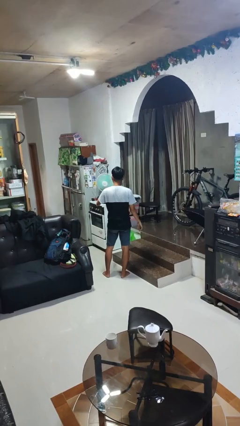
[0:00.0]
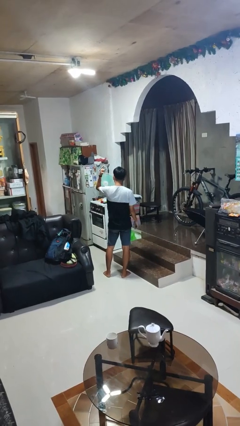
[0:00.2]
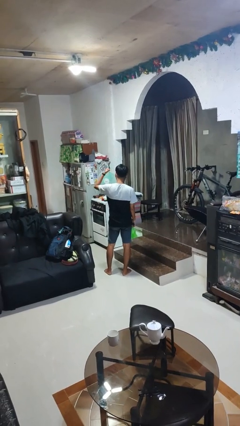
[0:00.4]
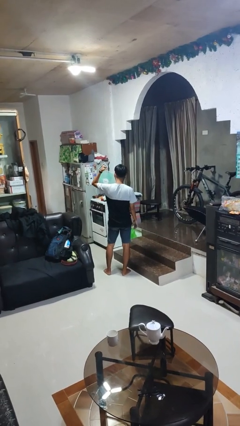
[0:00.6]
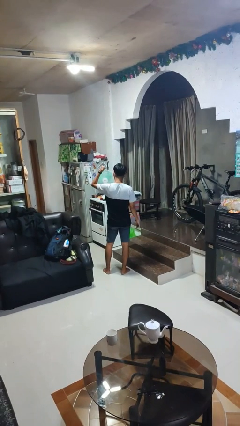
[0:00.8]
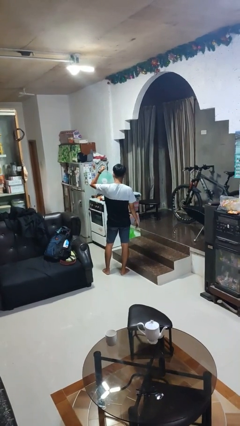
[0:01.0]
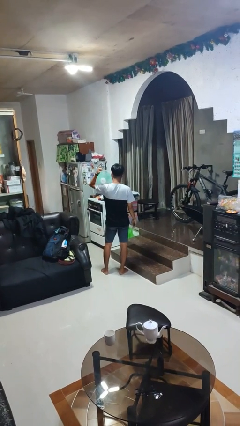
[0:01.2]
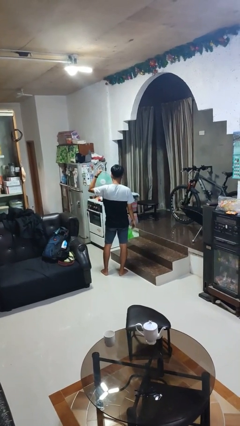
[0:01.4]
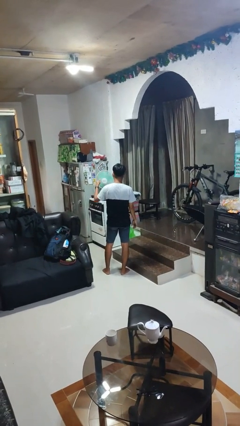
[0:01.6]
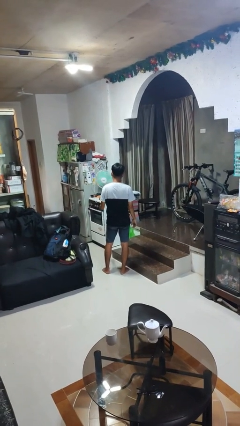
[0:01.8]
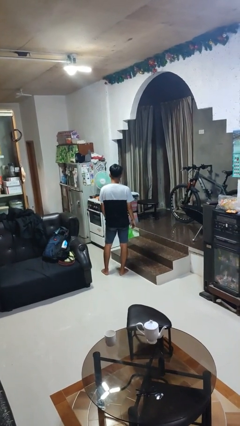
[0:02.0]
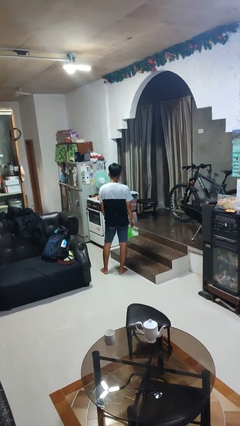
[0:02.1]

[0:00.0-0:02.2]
person gestures behind me

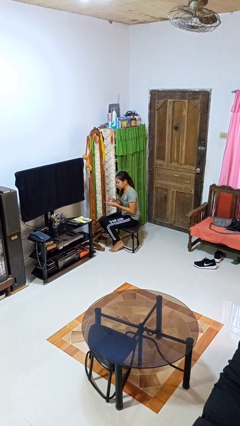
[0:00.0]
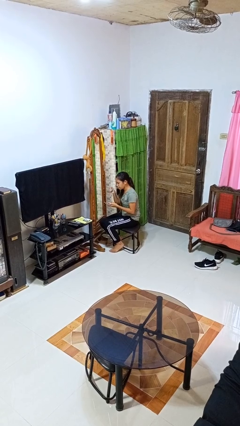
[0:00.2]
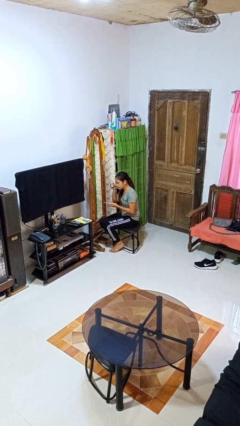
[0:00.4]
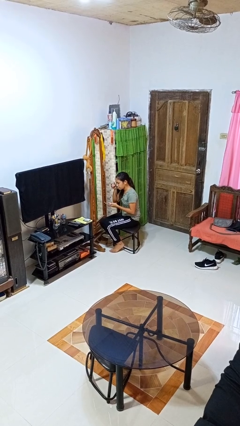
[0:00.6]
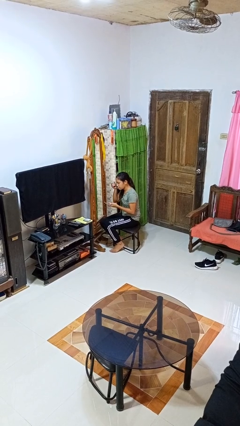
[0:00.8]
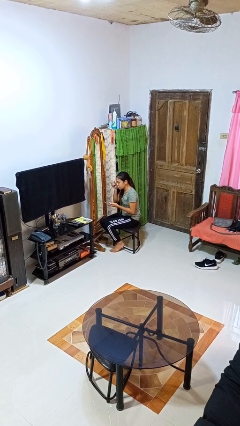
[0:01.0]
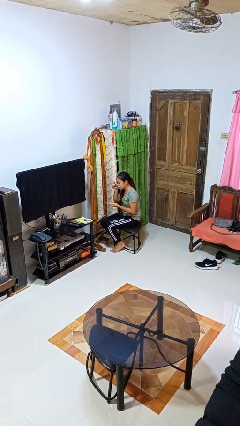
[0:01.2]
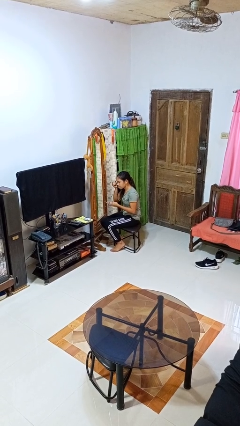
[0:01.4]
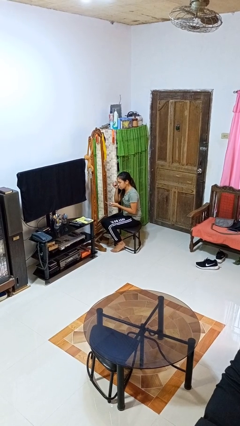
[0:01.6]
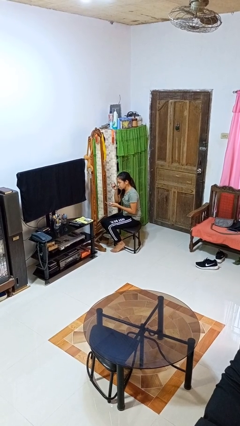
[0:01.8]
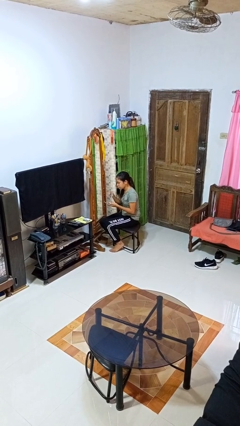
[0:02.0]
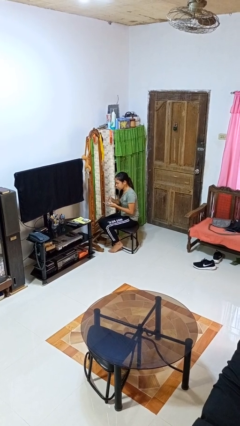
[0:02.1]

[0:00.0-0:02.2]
person applies eye makeup

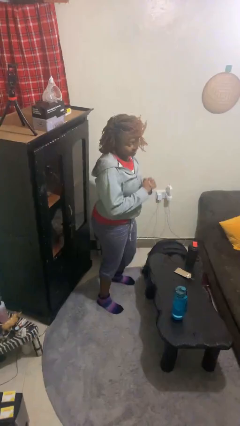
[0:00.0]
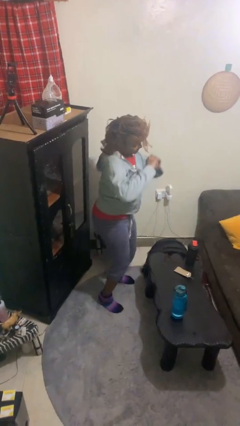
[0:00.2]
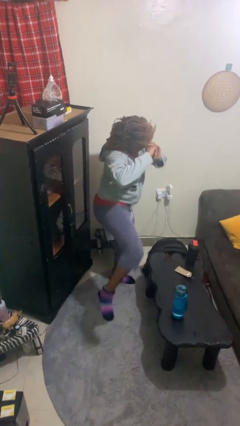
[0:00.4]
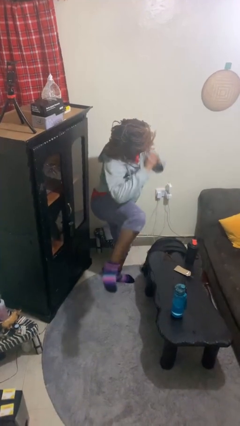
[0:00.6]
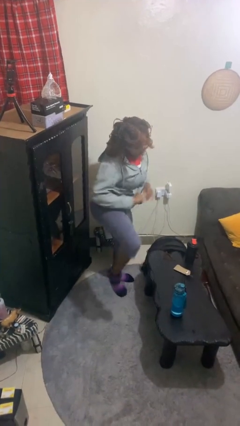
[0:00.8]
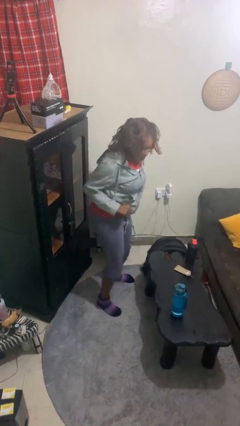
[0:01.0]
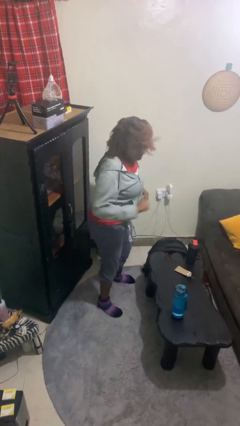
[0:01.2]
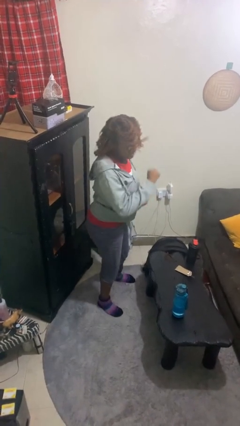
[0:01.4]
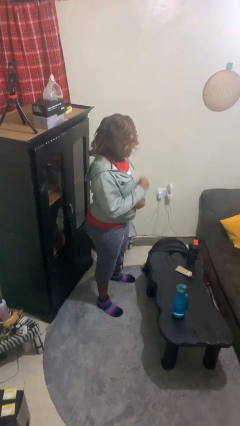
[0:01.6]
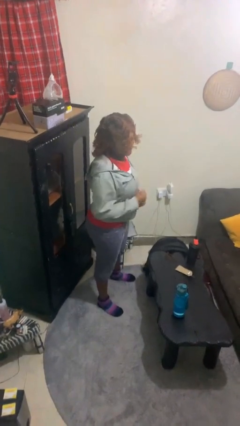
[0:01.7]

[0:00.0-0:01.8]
person karate kicks

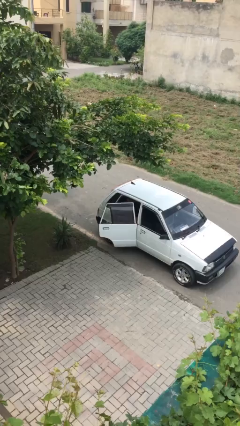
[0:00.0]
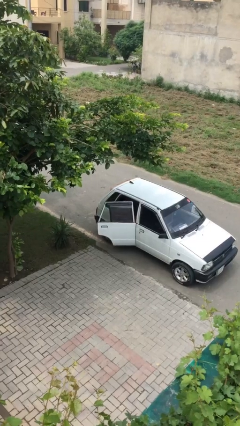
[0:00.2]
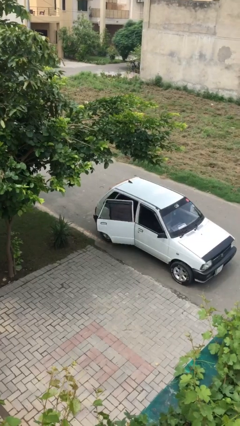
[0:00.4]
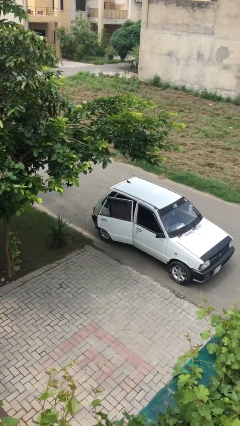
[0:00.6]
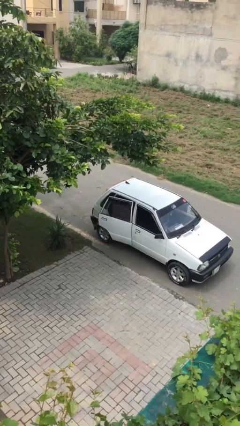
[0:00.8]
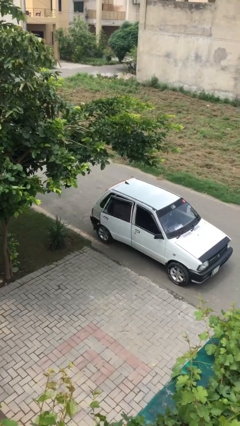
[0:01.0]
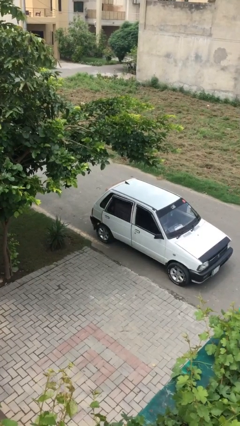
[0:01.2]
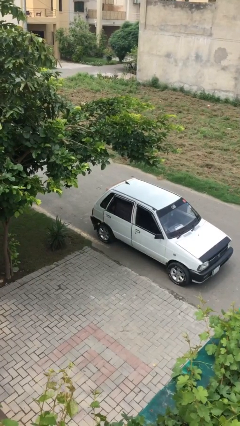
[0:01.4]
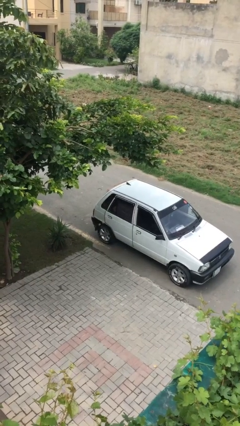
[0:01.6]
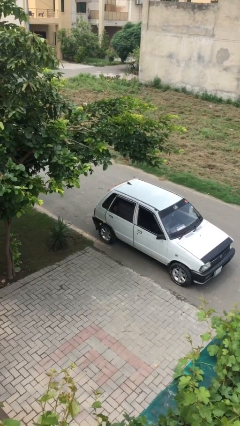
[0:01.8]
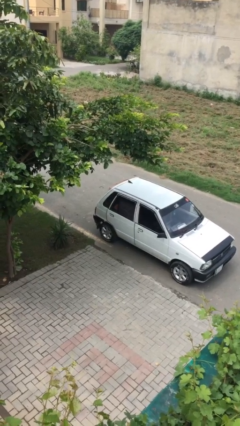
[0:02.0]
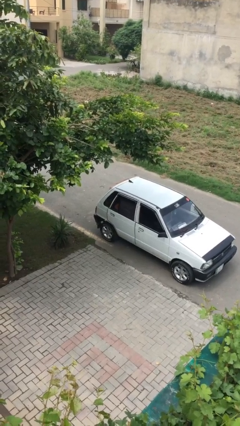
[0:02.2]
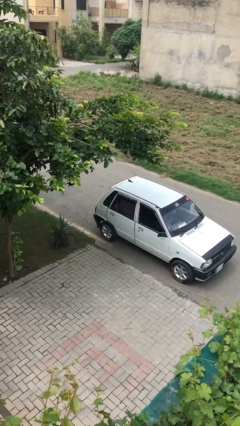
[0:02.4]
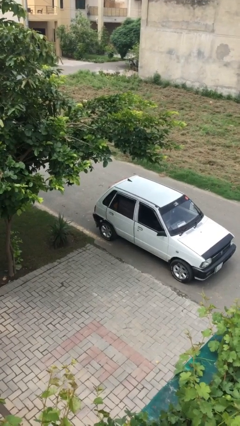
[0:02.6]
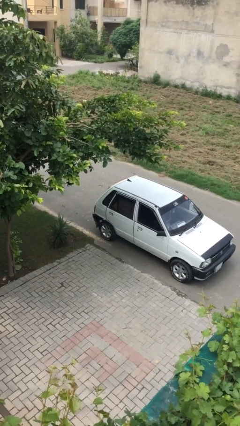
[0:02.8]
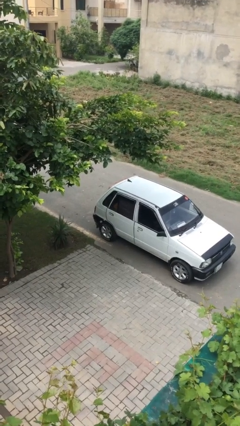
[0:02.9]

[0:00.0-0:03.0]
person closes car door

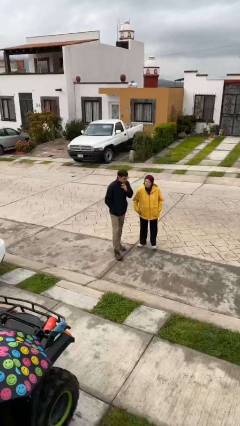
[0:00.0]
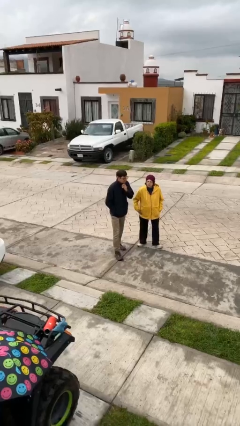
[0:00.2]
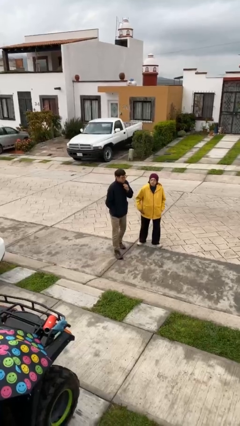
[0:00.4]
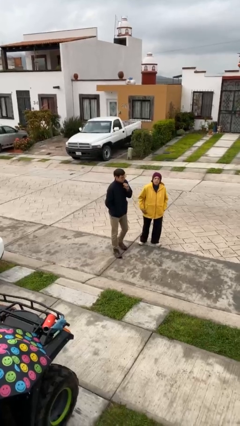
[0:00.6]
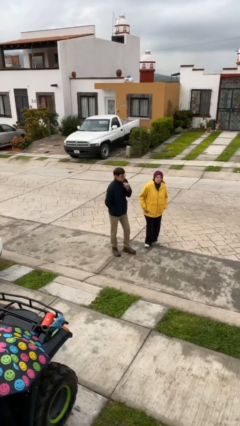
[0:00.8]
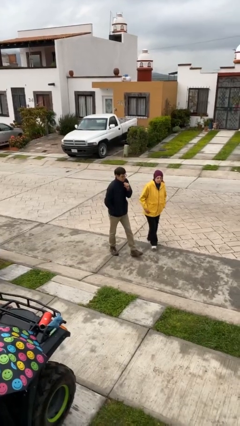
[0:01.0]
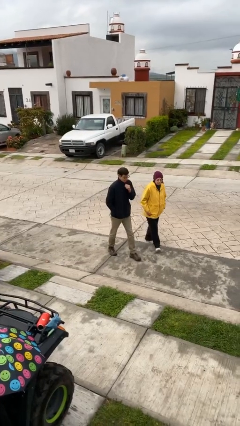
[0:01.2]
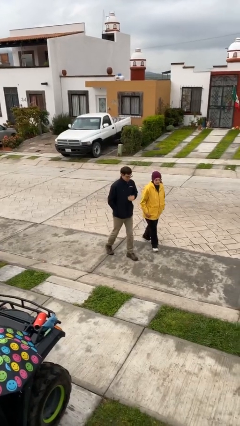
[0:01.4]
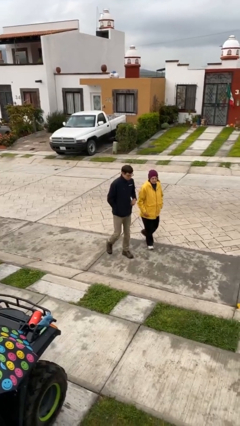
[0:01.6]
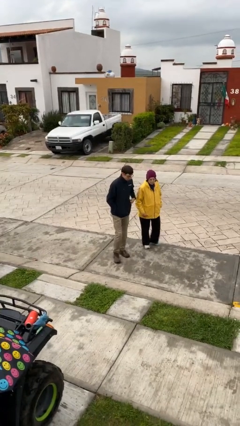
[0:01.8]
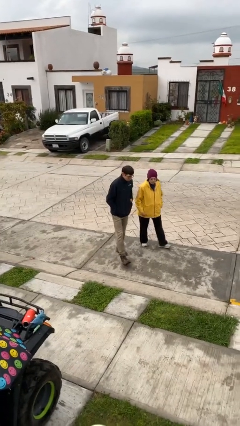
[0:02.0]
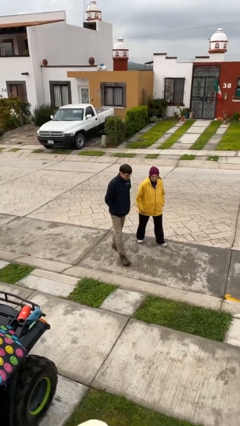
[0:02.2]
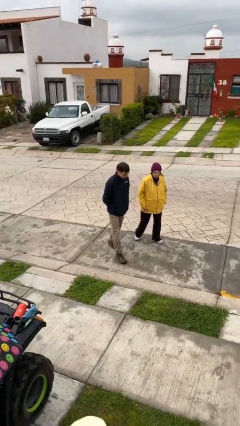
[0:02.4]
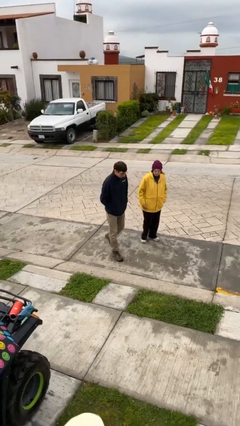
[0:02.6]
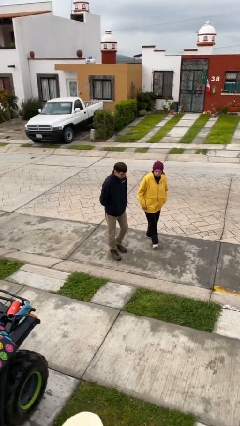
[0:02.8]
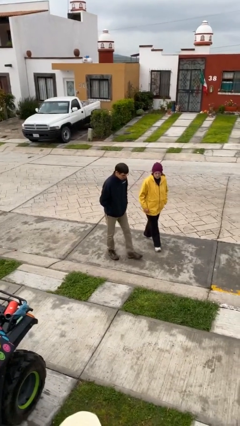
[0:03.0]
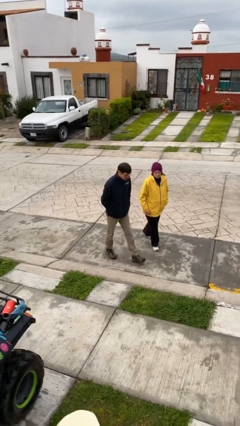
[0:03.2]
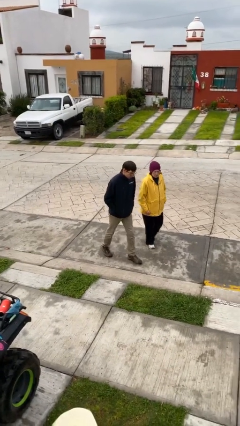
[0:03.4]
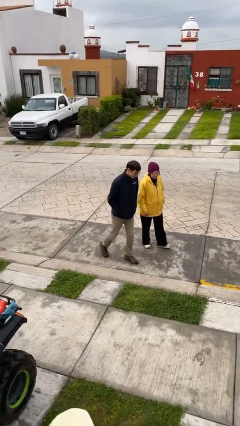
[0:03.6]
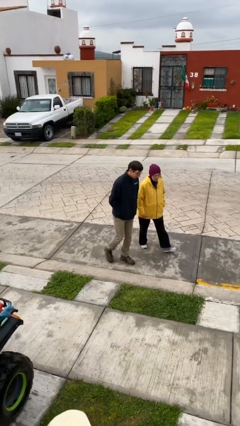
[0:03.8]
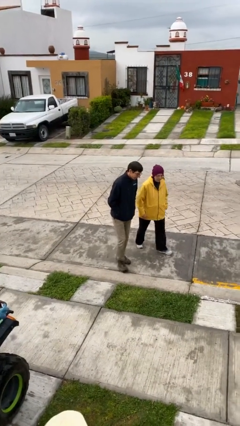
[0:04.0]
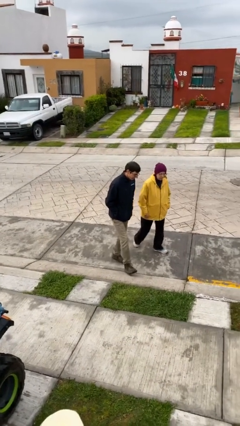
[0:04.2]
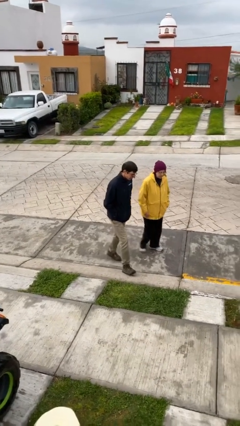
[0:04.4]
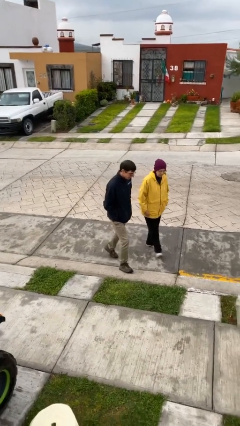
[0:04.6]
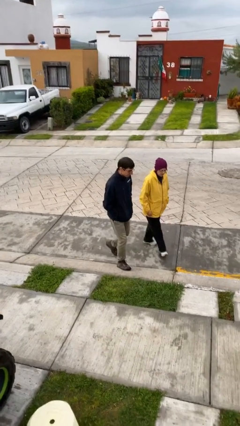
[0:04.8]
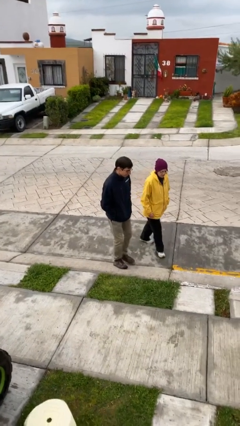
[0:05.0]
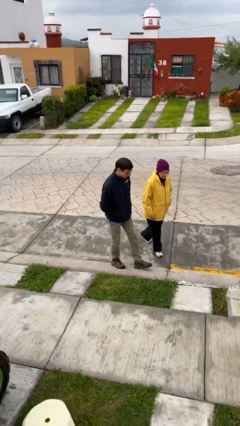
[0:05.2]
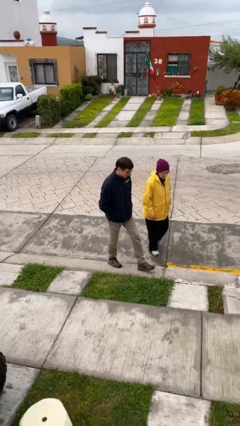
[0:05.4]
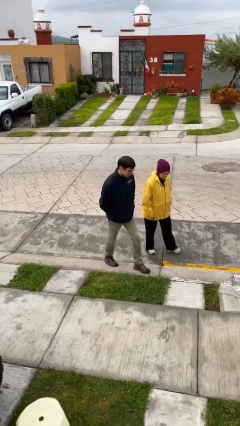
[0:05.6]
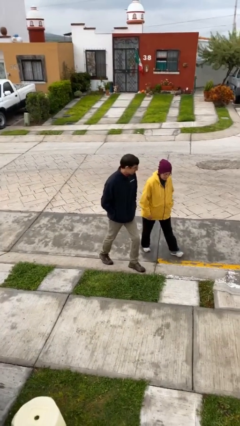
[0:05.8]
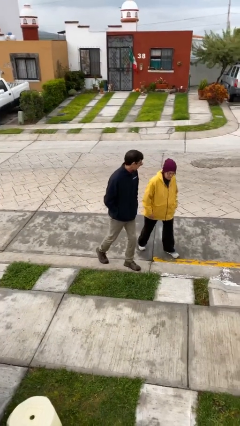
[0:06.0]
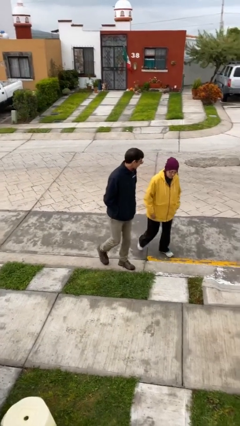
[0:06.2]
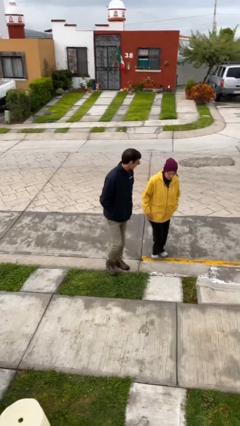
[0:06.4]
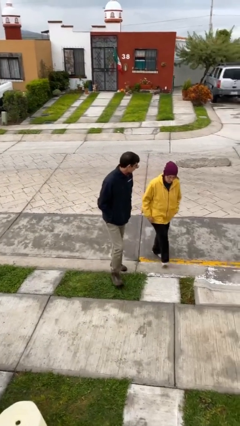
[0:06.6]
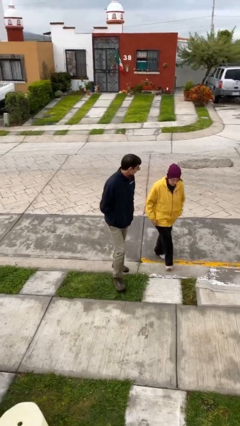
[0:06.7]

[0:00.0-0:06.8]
person talks to person

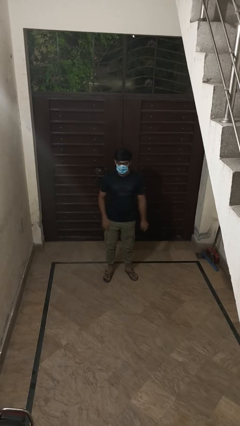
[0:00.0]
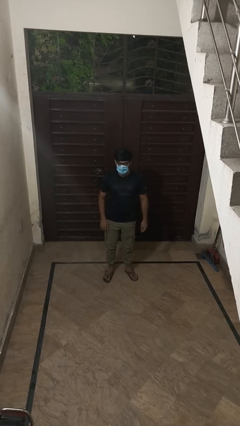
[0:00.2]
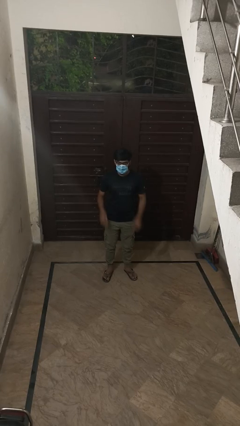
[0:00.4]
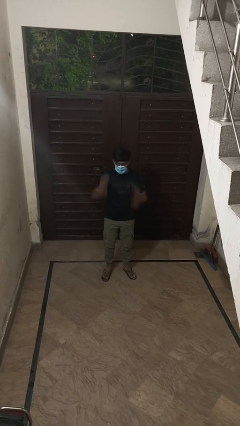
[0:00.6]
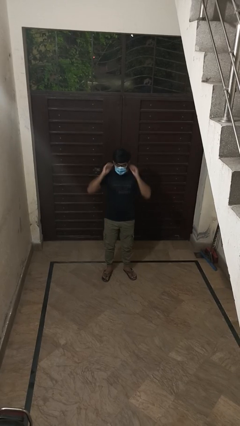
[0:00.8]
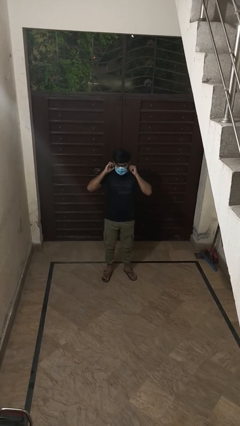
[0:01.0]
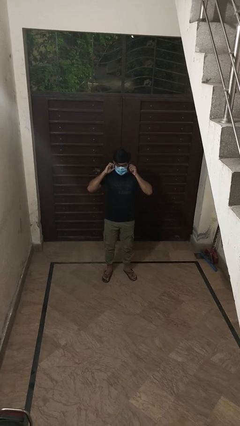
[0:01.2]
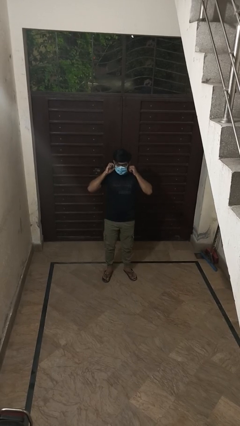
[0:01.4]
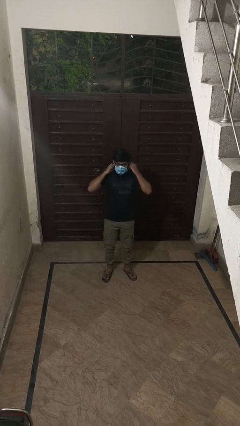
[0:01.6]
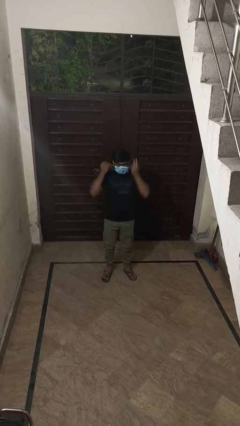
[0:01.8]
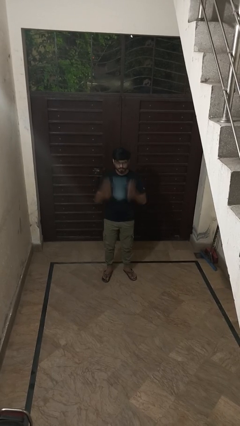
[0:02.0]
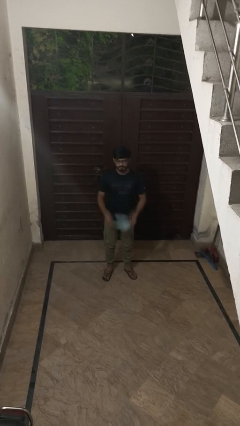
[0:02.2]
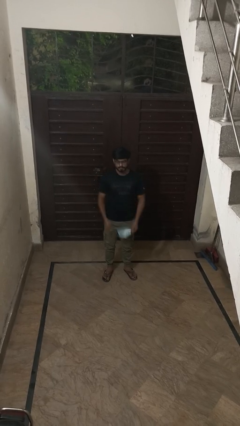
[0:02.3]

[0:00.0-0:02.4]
person takes off facemask
